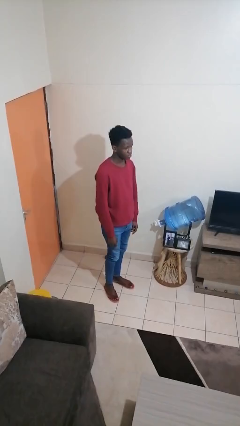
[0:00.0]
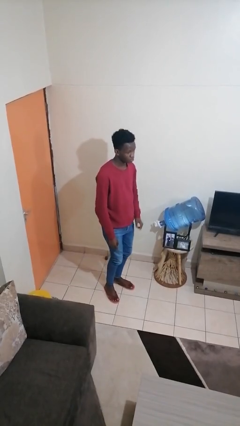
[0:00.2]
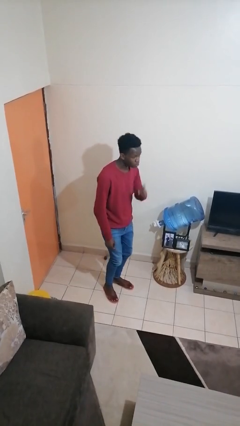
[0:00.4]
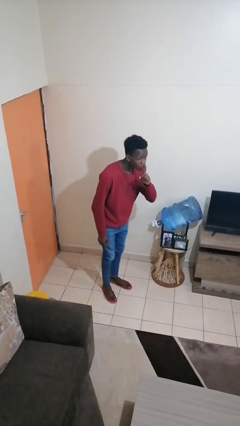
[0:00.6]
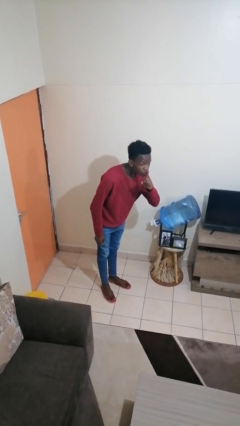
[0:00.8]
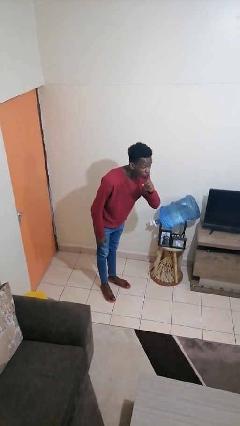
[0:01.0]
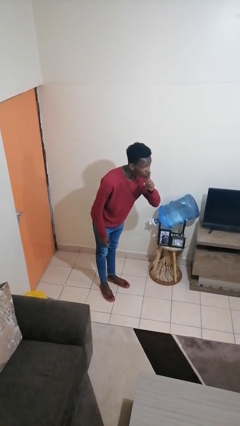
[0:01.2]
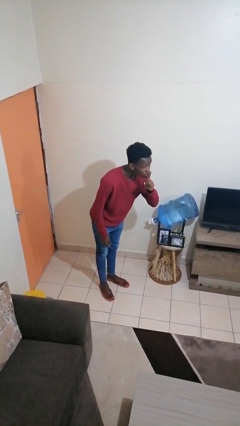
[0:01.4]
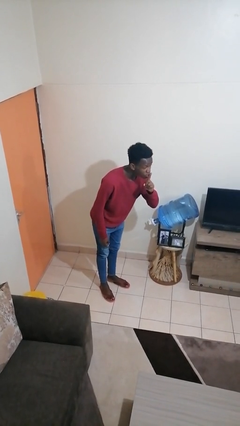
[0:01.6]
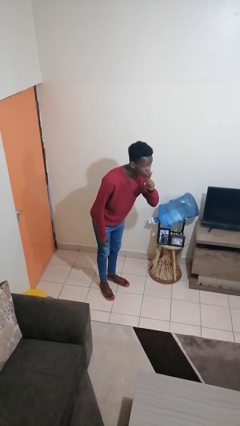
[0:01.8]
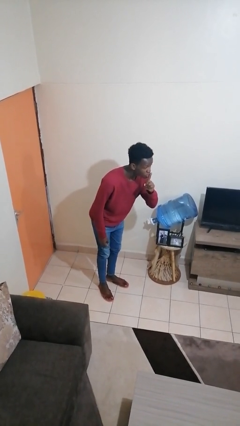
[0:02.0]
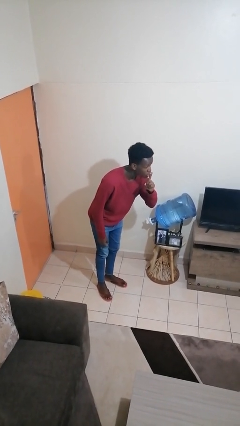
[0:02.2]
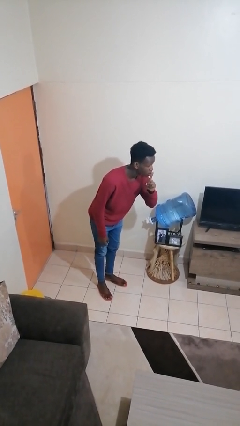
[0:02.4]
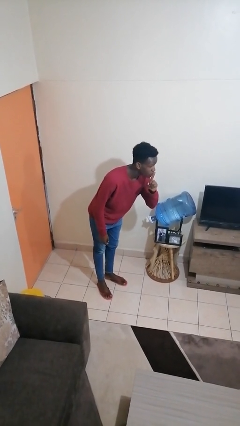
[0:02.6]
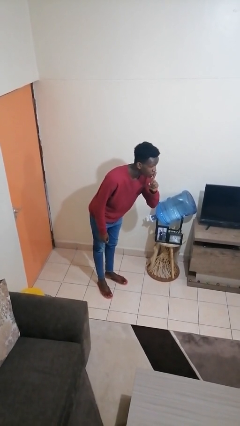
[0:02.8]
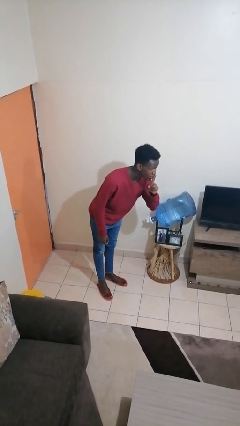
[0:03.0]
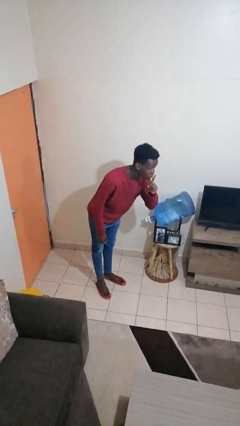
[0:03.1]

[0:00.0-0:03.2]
person gestures be quiet

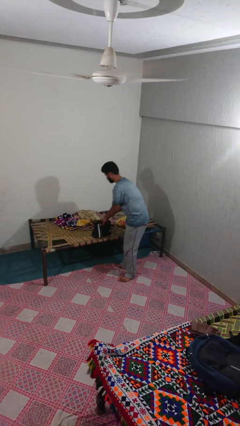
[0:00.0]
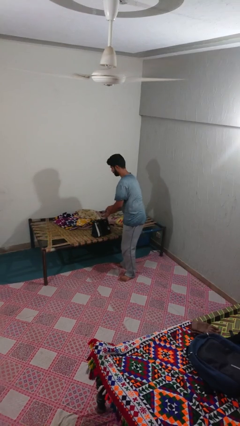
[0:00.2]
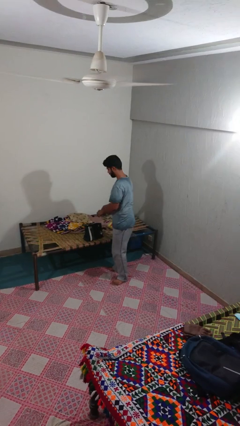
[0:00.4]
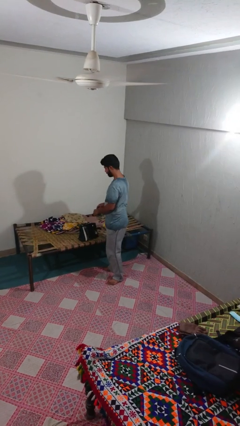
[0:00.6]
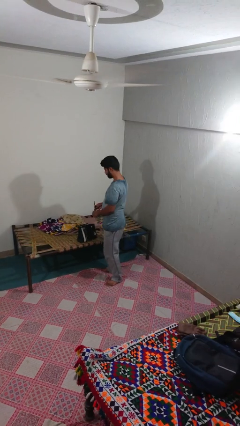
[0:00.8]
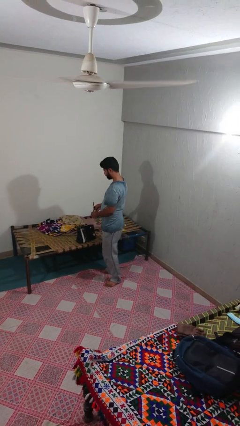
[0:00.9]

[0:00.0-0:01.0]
person takes object from purse

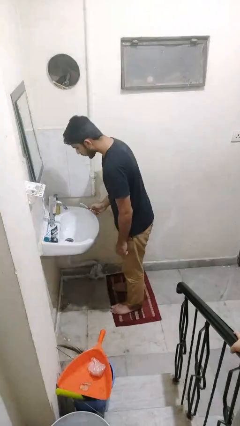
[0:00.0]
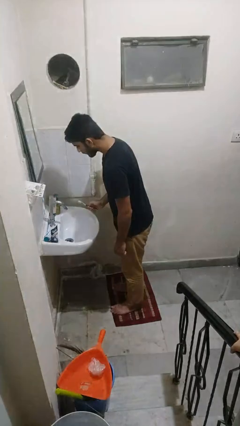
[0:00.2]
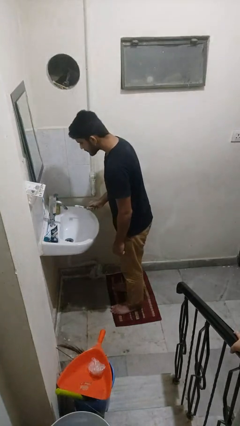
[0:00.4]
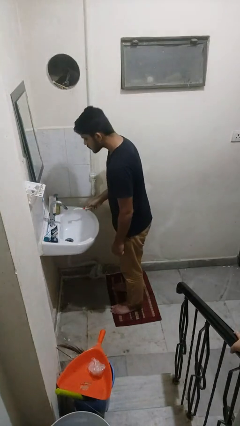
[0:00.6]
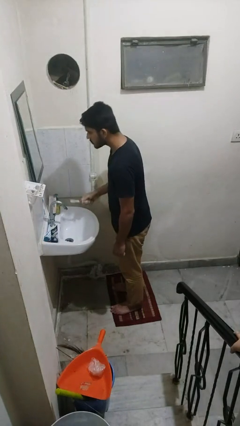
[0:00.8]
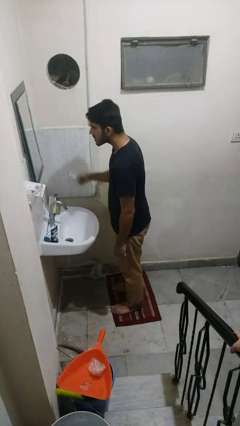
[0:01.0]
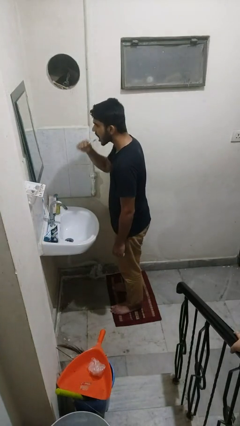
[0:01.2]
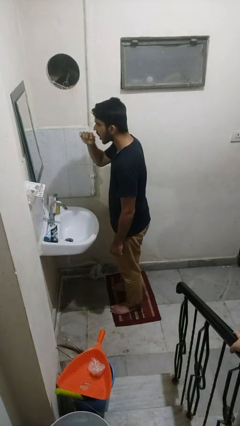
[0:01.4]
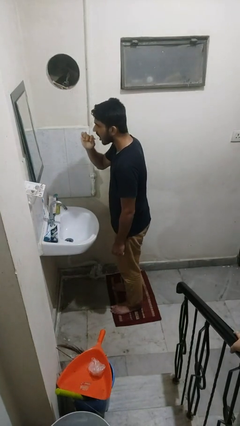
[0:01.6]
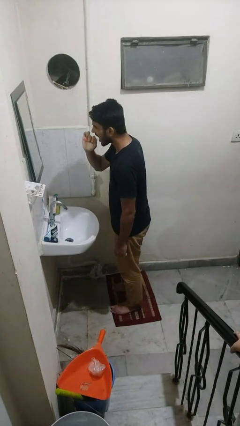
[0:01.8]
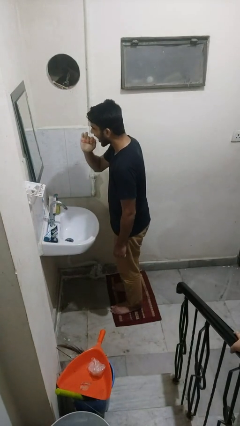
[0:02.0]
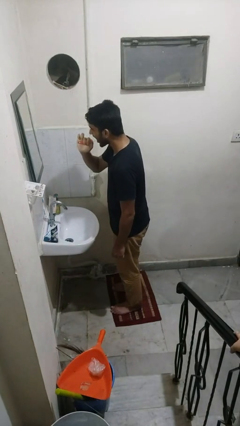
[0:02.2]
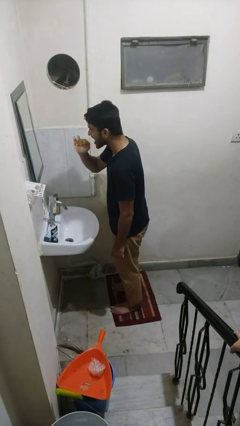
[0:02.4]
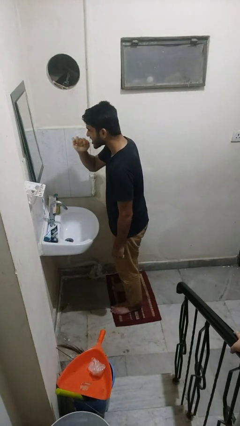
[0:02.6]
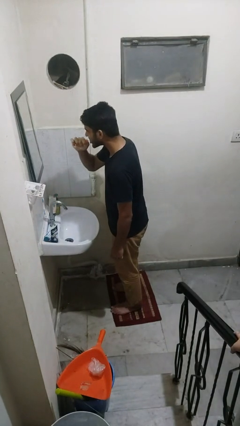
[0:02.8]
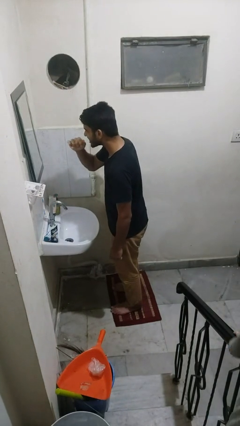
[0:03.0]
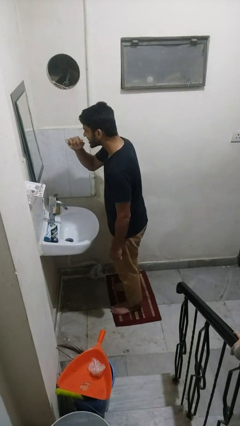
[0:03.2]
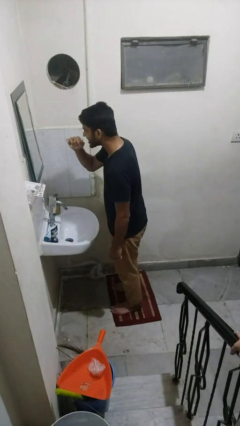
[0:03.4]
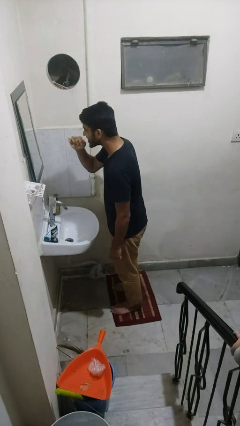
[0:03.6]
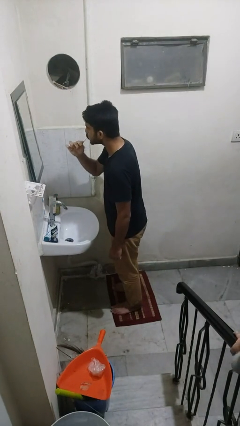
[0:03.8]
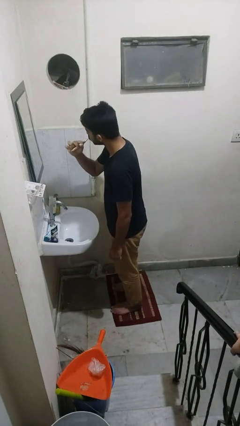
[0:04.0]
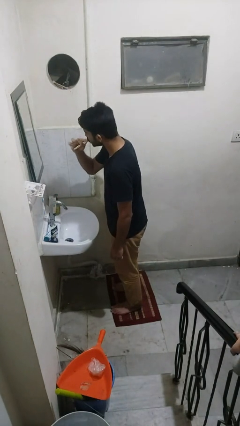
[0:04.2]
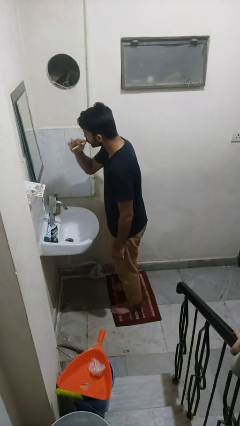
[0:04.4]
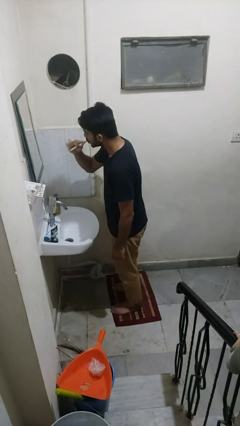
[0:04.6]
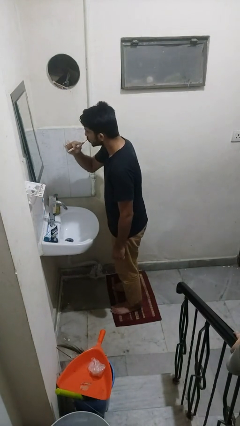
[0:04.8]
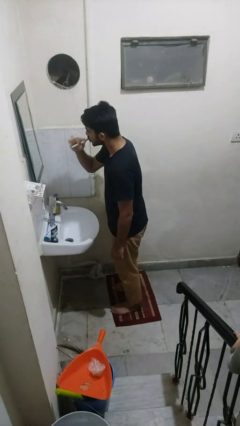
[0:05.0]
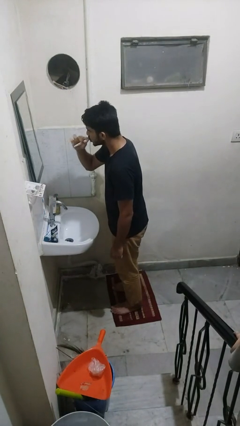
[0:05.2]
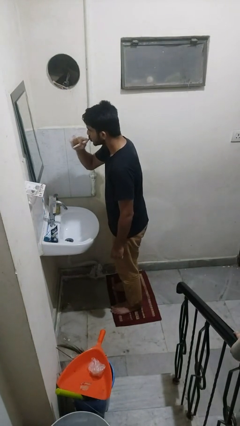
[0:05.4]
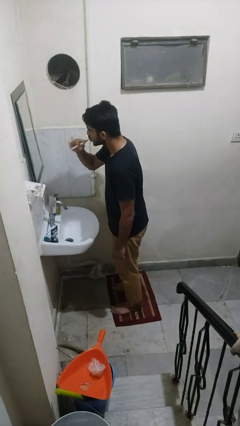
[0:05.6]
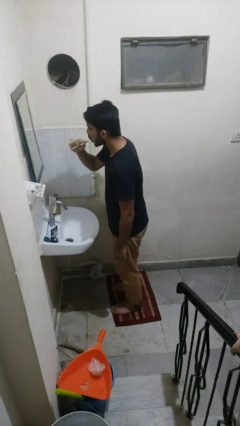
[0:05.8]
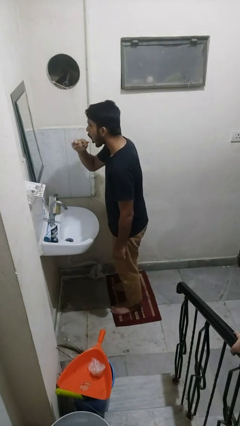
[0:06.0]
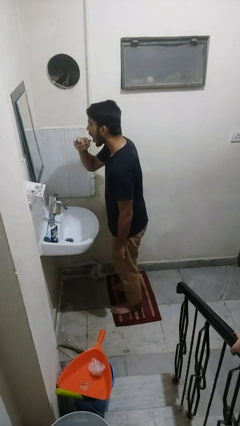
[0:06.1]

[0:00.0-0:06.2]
person brushes teeth

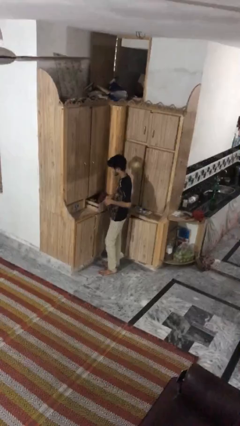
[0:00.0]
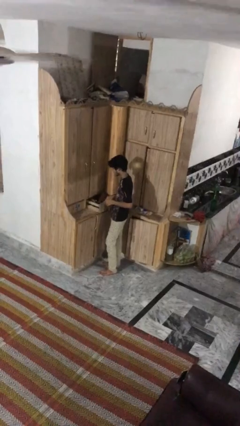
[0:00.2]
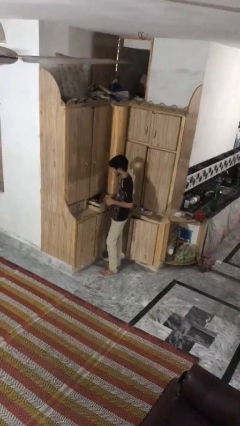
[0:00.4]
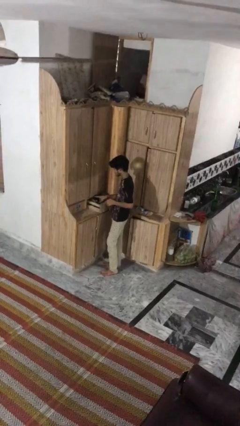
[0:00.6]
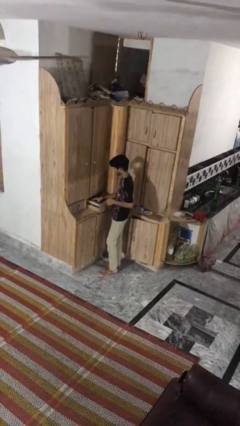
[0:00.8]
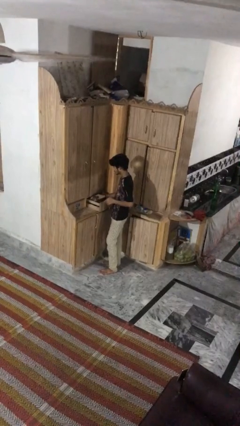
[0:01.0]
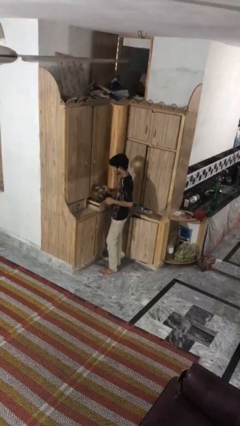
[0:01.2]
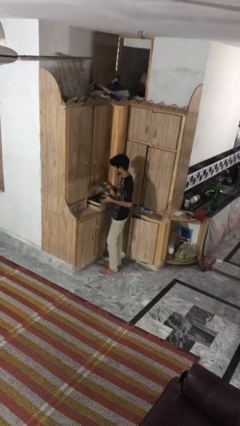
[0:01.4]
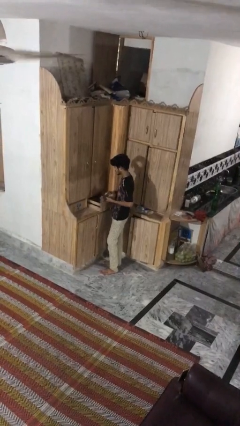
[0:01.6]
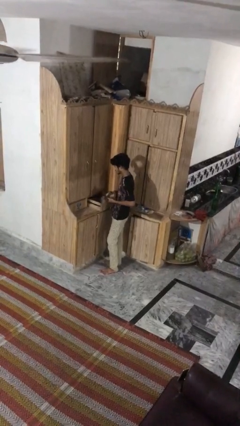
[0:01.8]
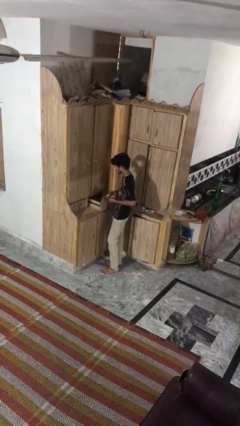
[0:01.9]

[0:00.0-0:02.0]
person takes clothes from dresser

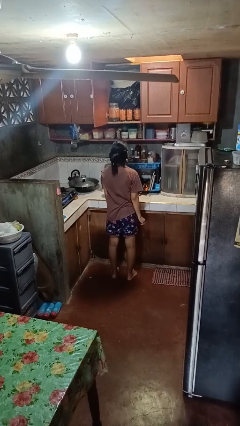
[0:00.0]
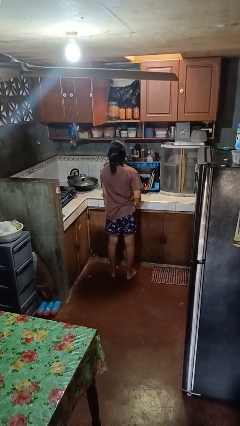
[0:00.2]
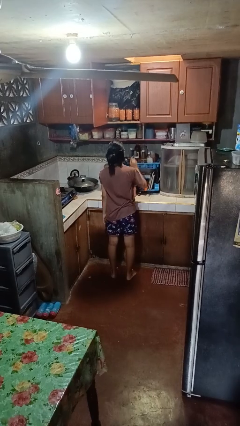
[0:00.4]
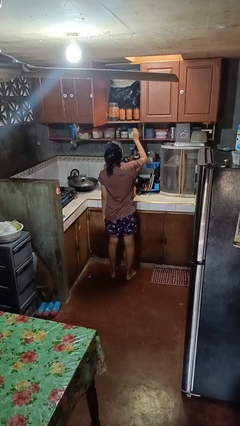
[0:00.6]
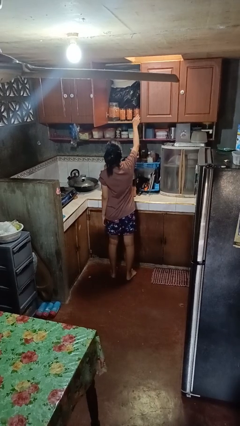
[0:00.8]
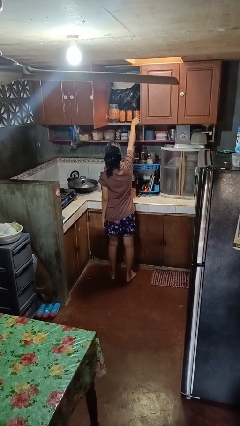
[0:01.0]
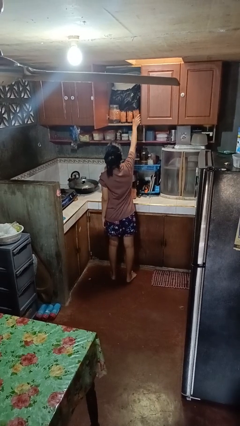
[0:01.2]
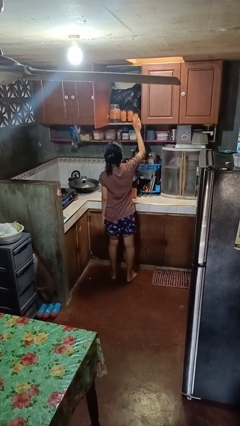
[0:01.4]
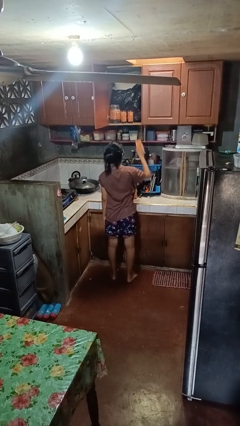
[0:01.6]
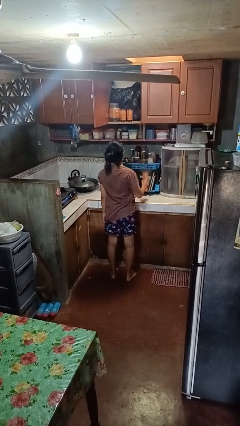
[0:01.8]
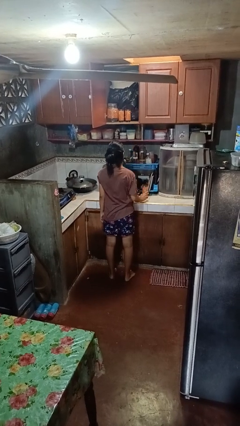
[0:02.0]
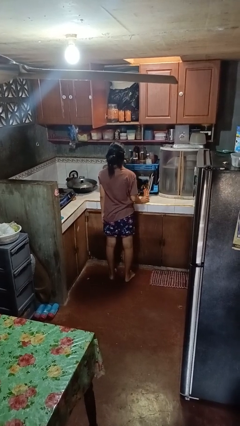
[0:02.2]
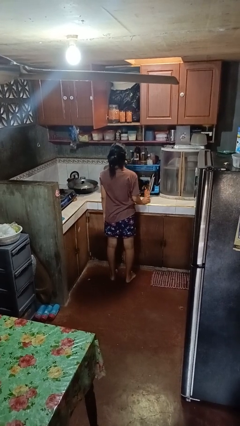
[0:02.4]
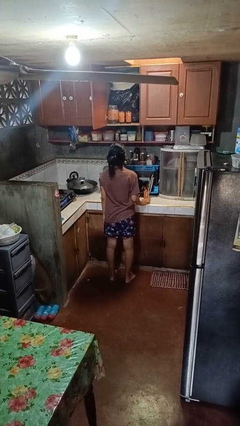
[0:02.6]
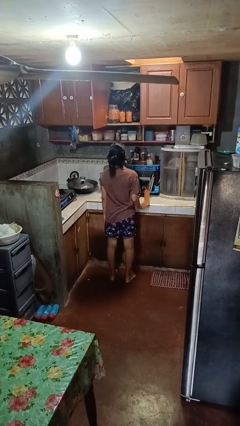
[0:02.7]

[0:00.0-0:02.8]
person takes object from cabinet

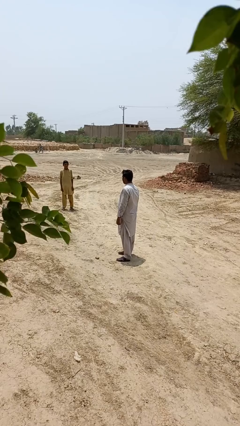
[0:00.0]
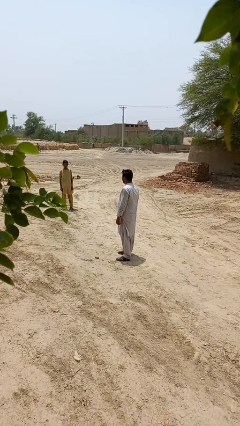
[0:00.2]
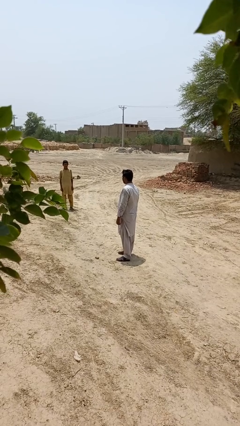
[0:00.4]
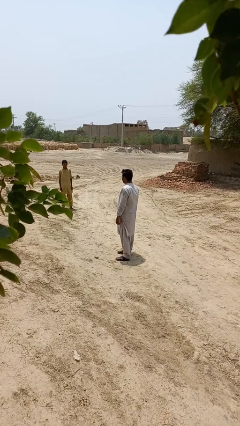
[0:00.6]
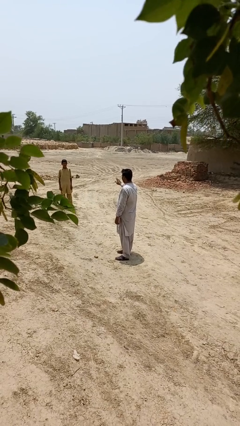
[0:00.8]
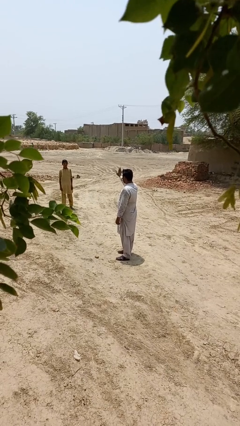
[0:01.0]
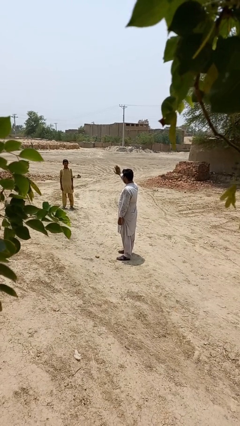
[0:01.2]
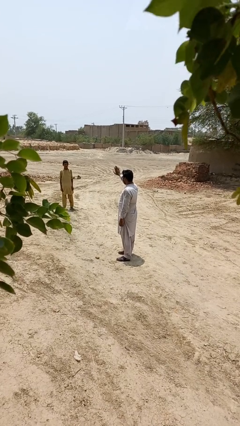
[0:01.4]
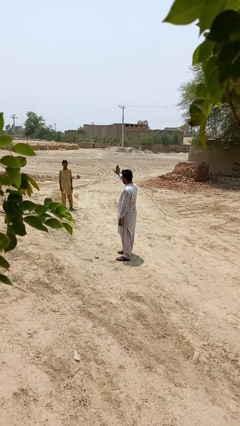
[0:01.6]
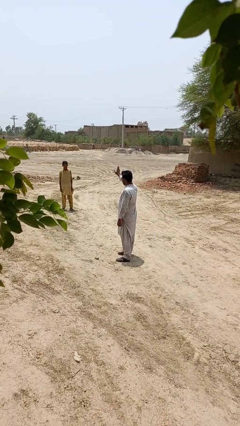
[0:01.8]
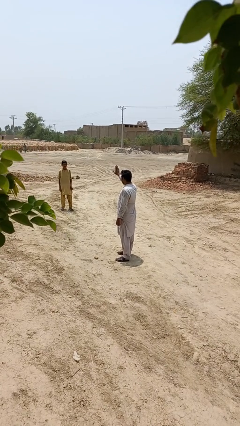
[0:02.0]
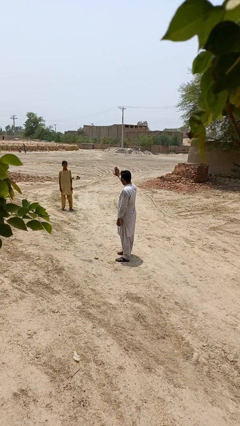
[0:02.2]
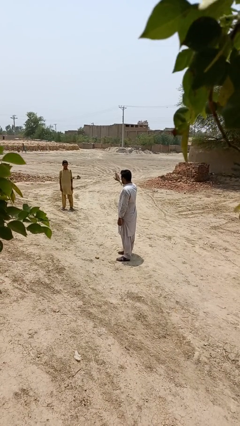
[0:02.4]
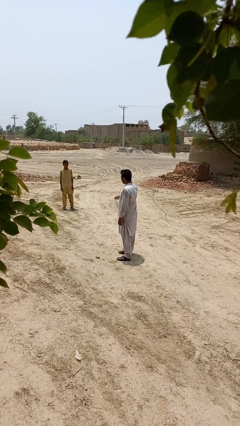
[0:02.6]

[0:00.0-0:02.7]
person waves at person
